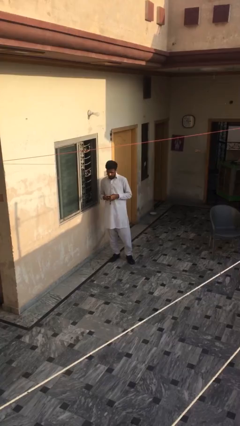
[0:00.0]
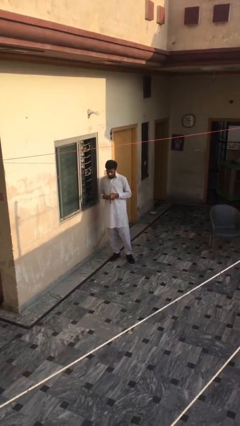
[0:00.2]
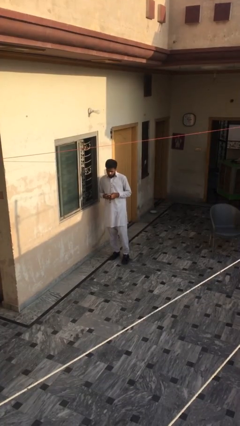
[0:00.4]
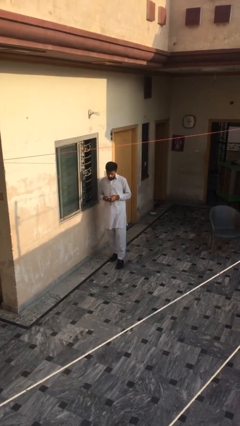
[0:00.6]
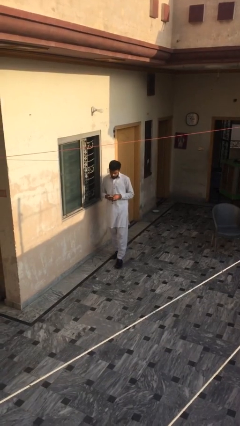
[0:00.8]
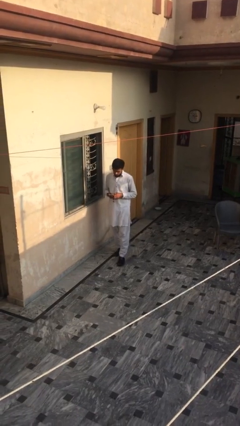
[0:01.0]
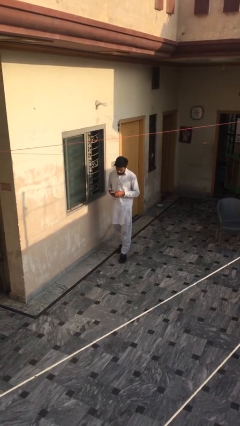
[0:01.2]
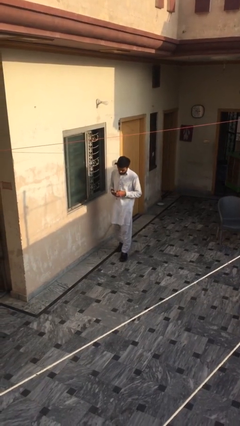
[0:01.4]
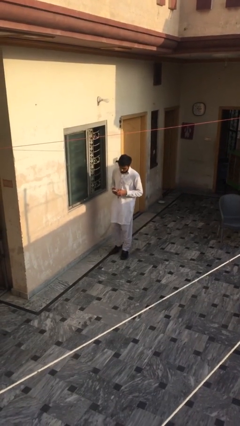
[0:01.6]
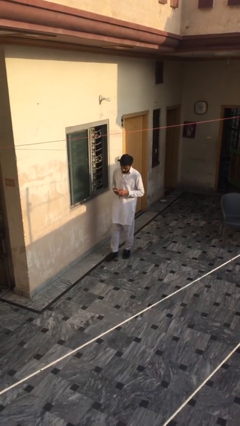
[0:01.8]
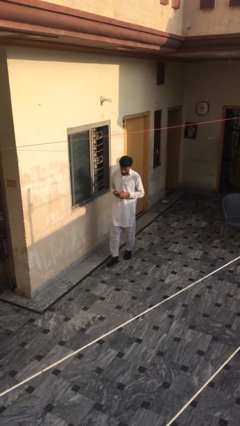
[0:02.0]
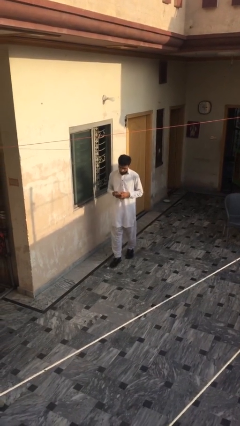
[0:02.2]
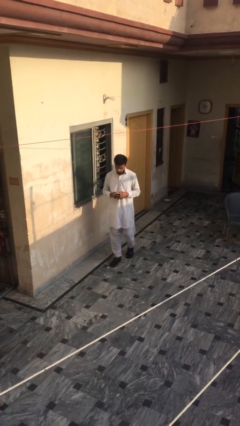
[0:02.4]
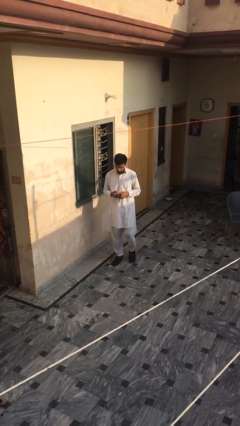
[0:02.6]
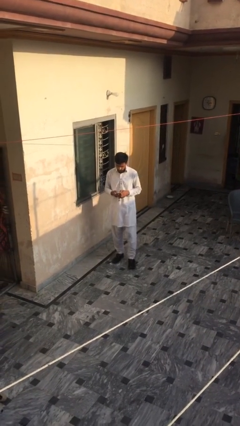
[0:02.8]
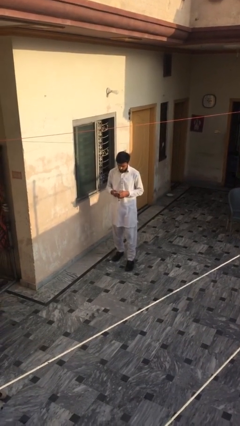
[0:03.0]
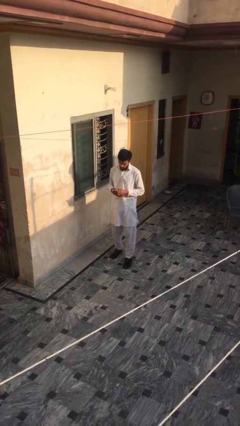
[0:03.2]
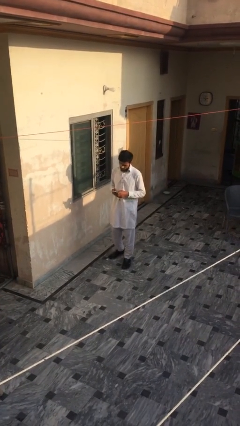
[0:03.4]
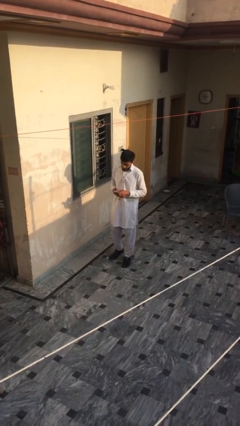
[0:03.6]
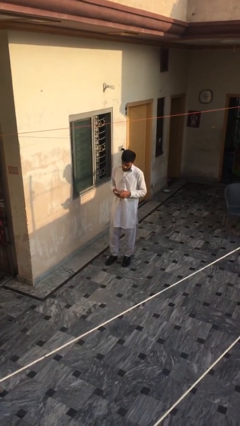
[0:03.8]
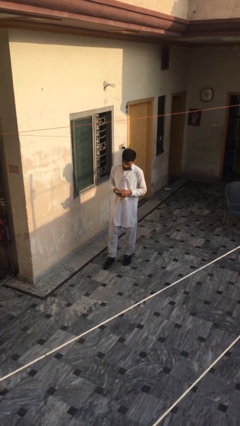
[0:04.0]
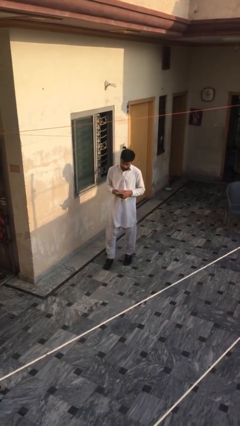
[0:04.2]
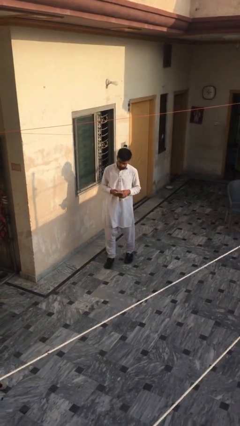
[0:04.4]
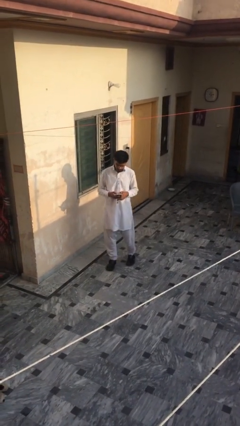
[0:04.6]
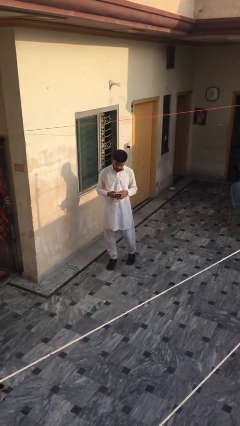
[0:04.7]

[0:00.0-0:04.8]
person texts on phone

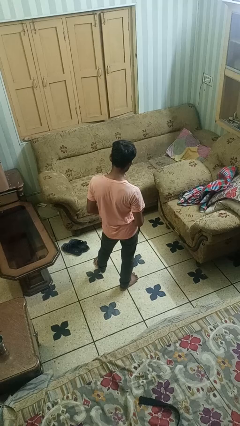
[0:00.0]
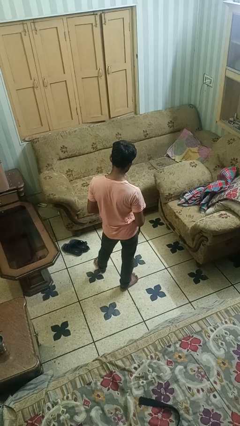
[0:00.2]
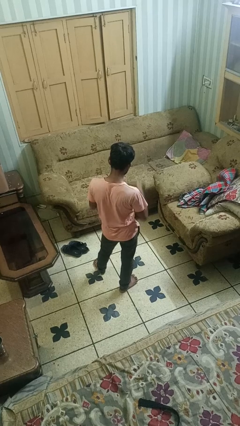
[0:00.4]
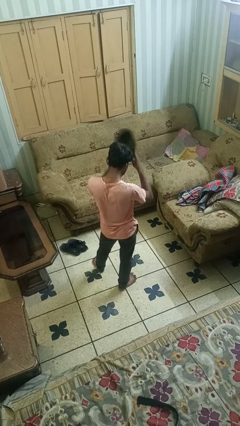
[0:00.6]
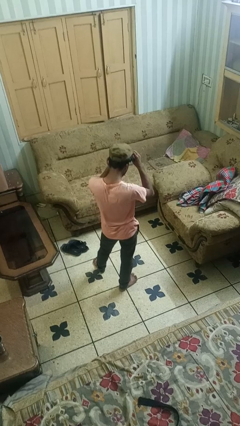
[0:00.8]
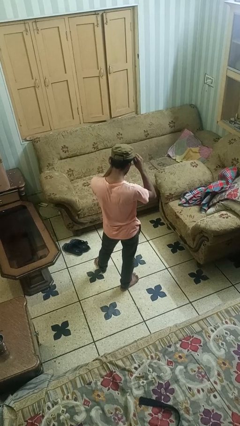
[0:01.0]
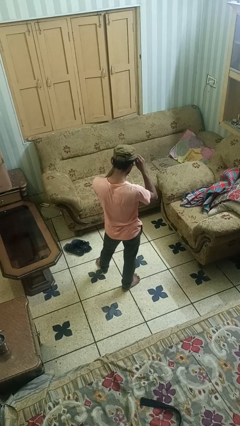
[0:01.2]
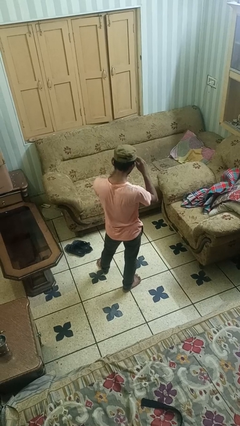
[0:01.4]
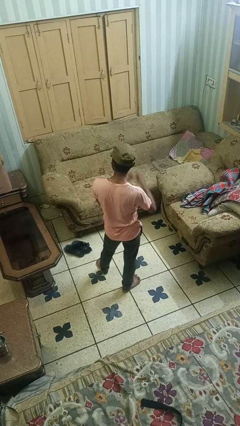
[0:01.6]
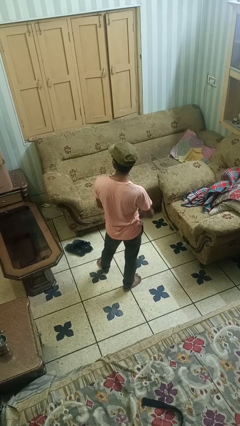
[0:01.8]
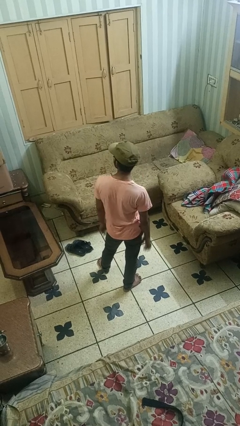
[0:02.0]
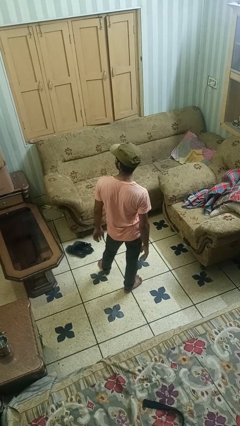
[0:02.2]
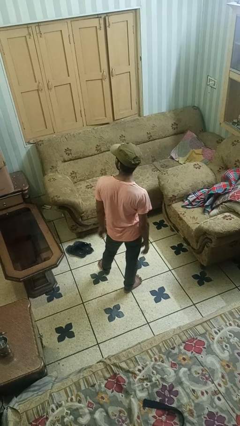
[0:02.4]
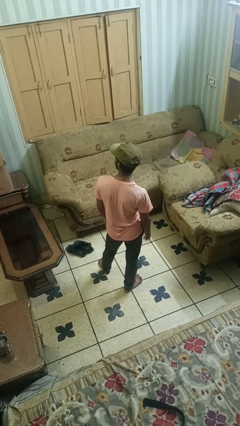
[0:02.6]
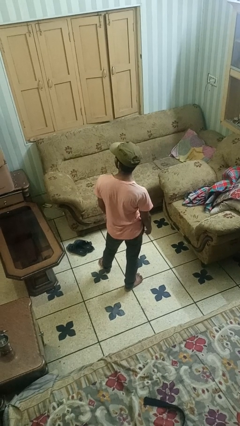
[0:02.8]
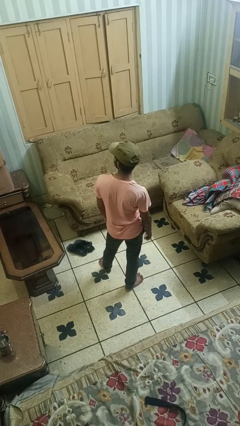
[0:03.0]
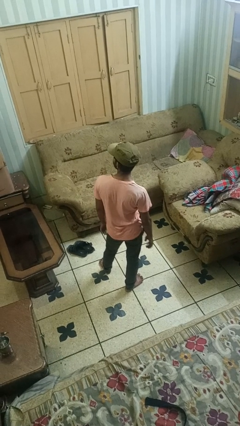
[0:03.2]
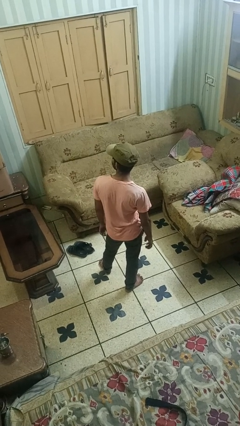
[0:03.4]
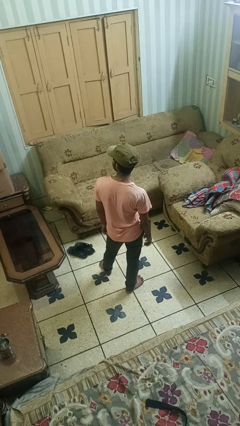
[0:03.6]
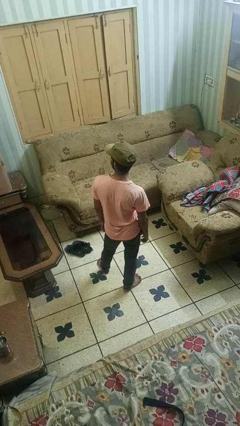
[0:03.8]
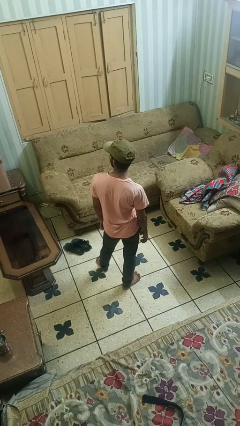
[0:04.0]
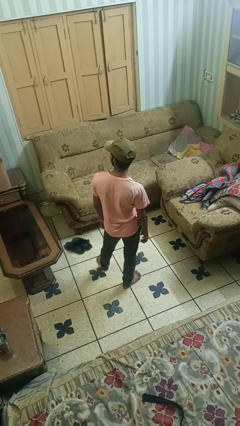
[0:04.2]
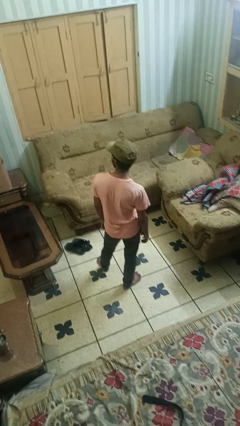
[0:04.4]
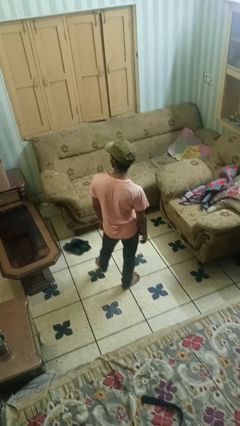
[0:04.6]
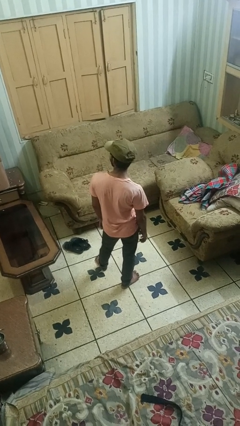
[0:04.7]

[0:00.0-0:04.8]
person puts on hat

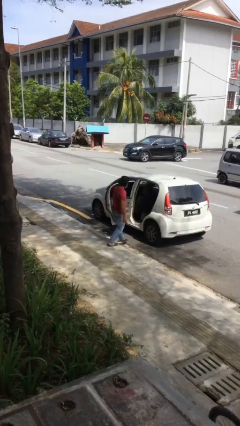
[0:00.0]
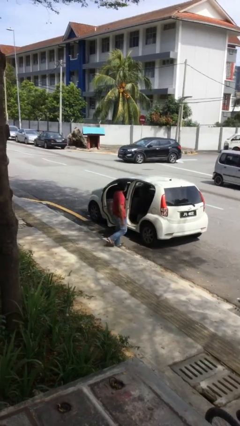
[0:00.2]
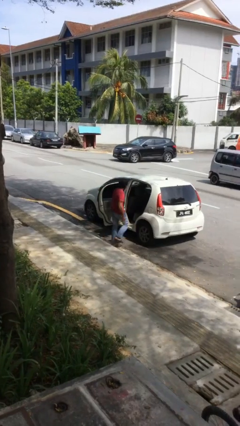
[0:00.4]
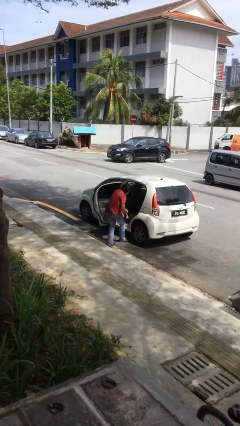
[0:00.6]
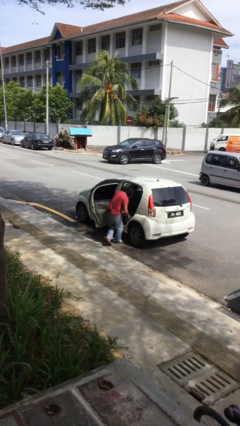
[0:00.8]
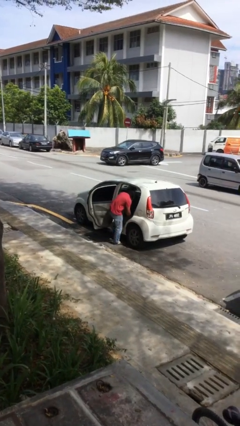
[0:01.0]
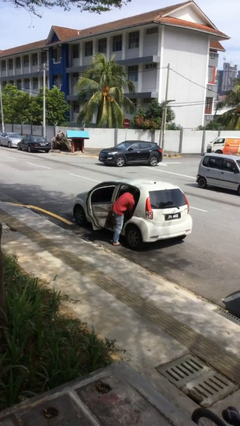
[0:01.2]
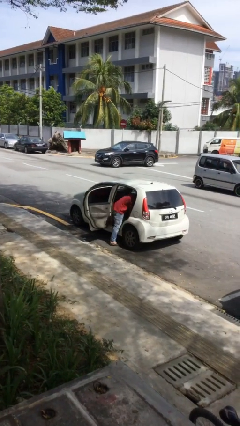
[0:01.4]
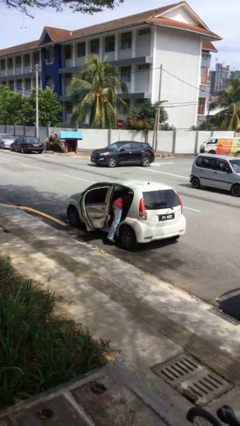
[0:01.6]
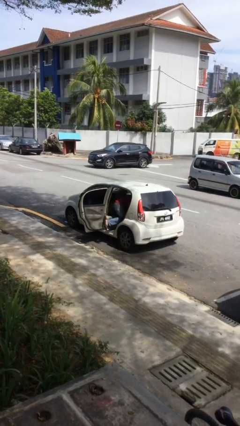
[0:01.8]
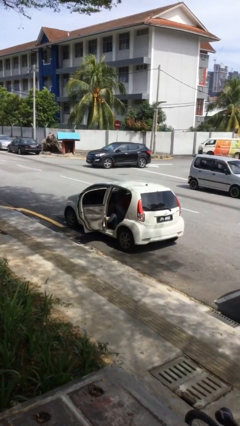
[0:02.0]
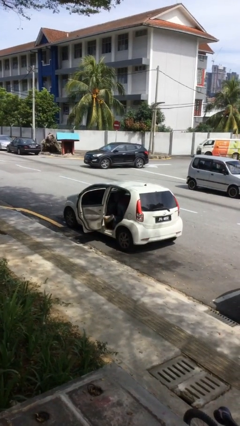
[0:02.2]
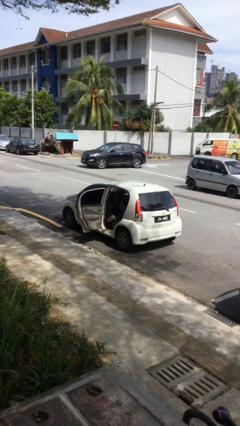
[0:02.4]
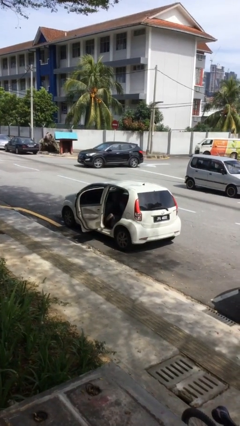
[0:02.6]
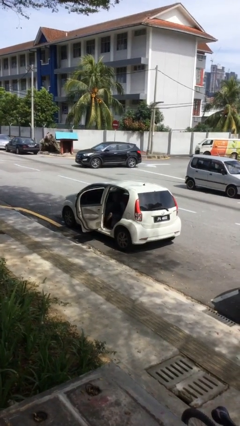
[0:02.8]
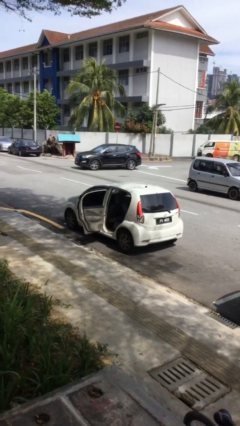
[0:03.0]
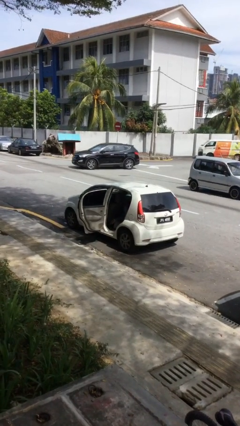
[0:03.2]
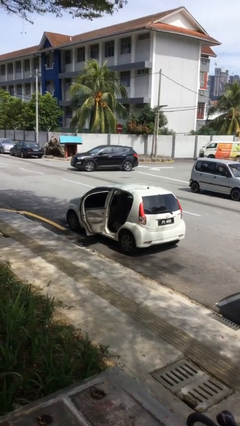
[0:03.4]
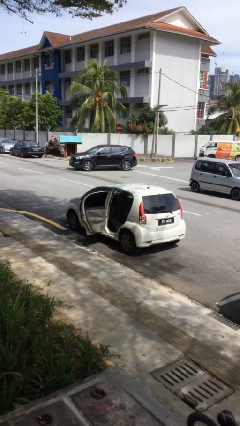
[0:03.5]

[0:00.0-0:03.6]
person enters car

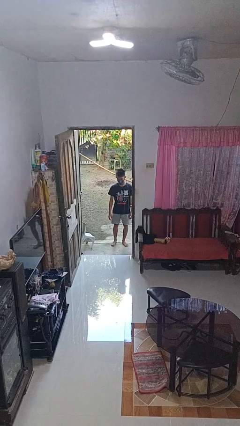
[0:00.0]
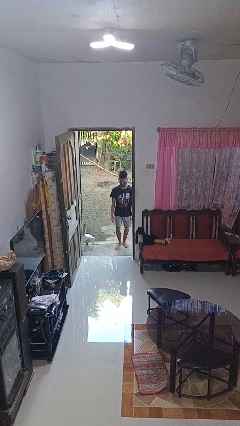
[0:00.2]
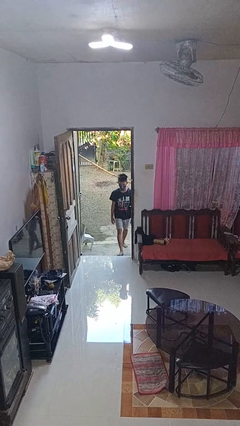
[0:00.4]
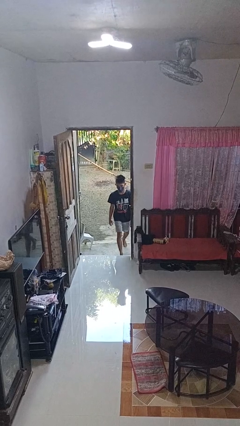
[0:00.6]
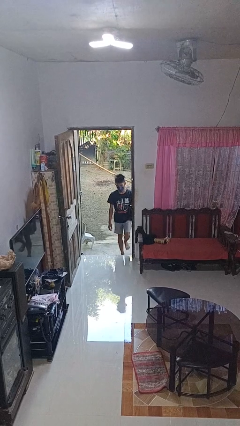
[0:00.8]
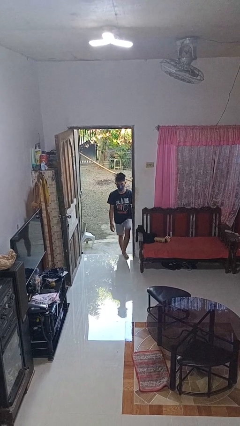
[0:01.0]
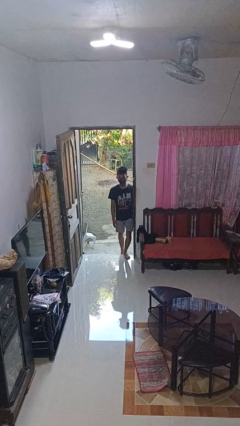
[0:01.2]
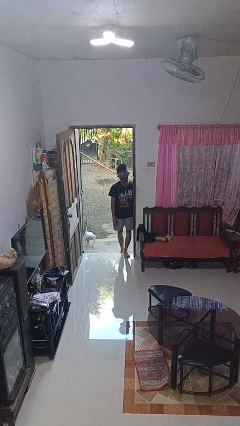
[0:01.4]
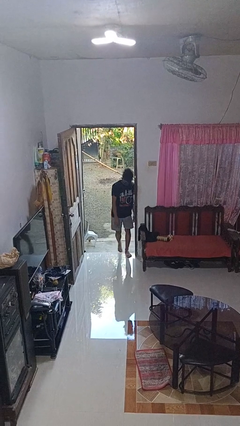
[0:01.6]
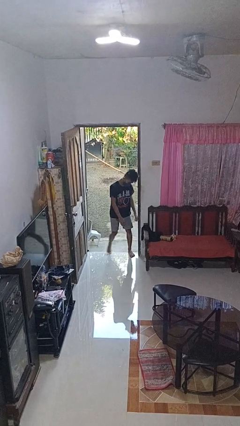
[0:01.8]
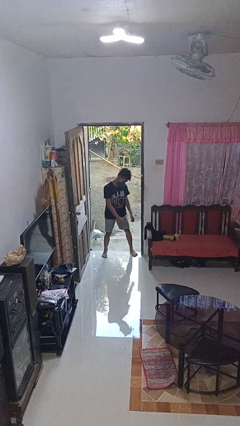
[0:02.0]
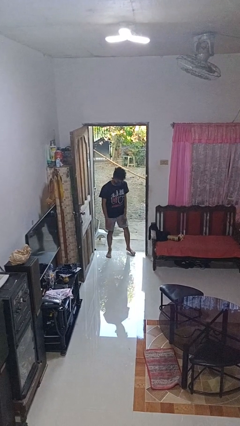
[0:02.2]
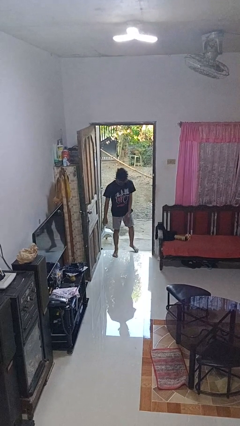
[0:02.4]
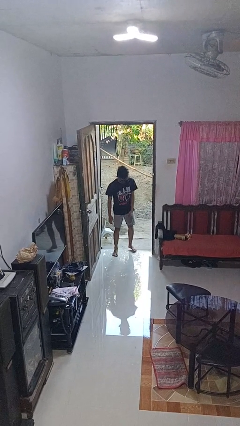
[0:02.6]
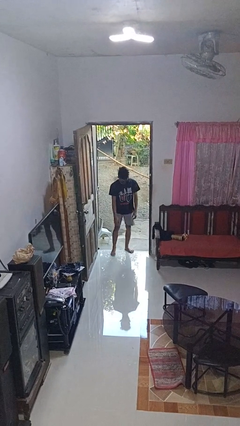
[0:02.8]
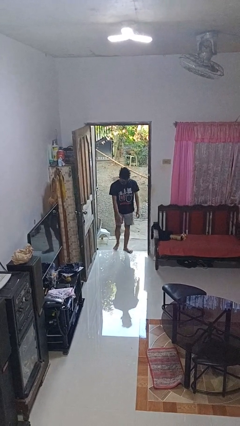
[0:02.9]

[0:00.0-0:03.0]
person bumps into wall

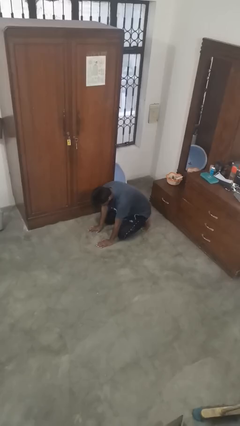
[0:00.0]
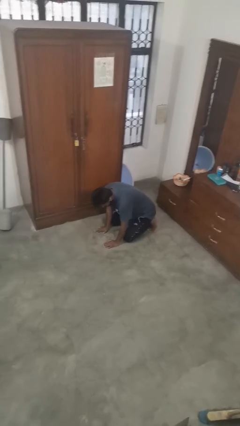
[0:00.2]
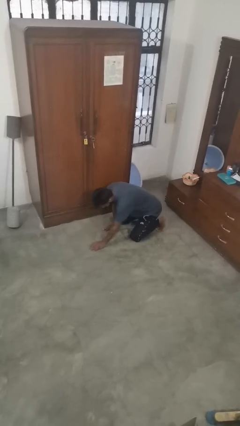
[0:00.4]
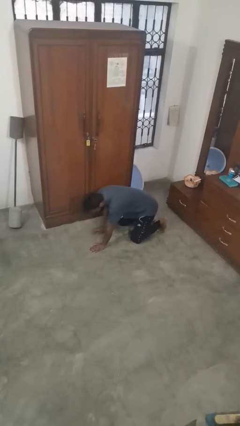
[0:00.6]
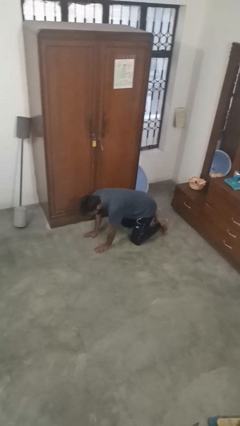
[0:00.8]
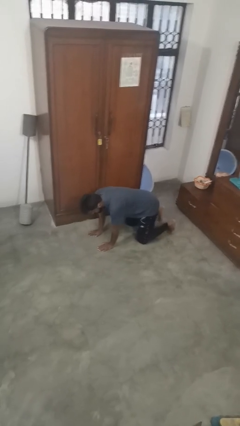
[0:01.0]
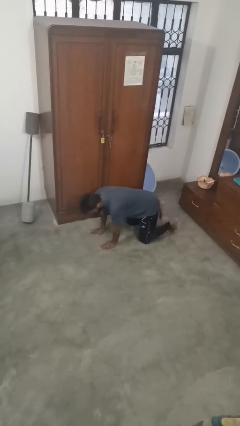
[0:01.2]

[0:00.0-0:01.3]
person crawls

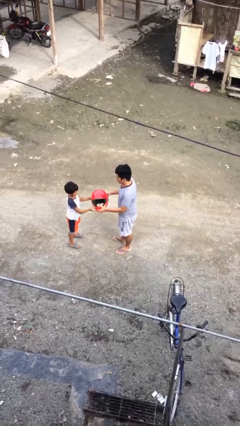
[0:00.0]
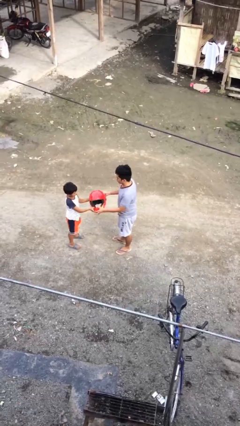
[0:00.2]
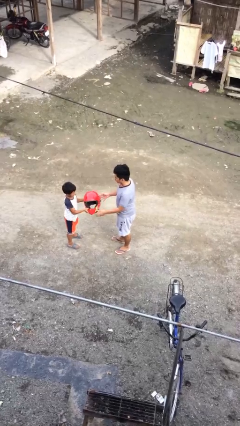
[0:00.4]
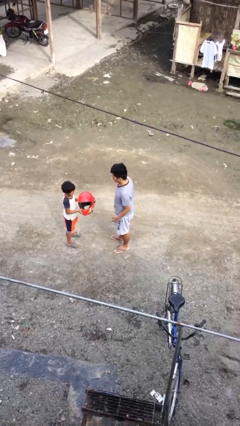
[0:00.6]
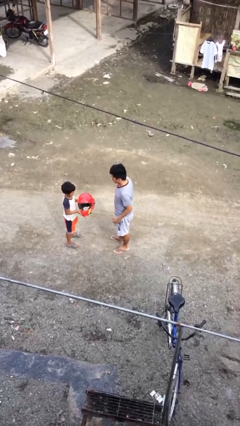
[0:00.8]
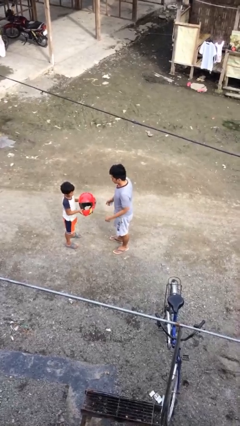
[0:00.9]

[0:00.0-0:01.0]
person transfers object to person
